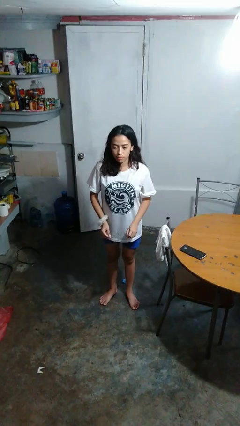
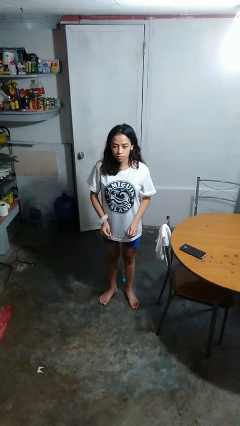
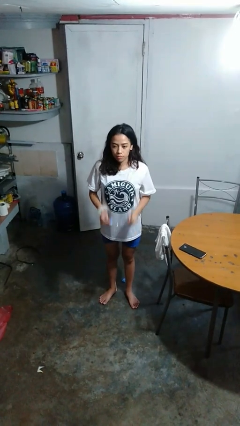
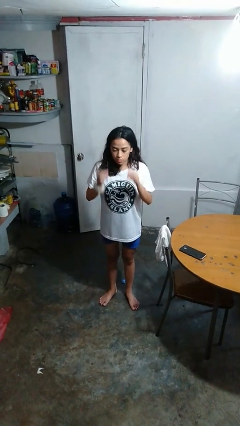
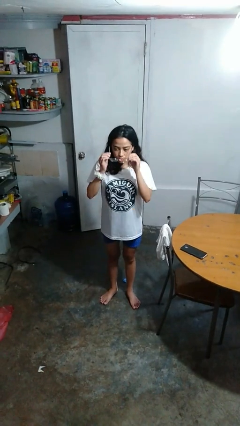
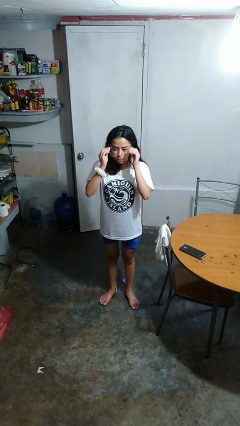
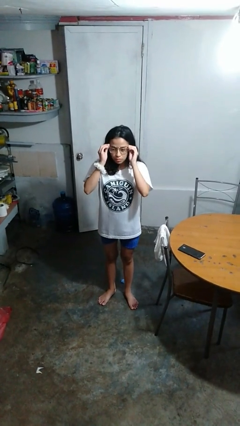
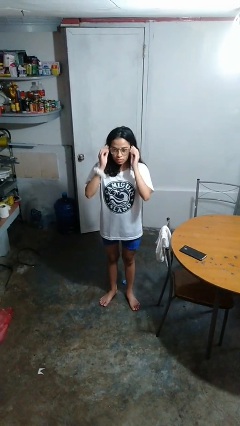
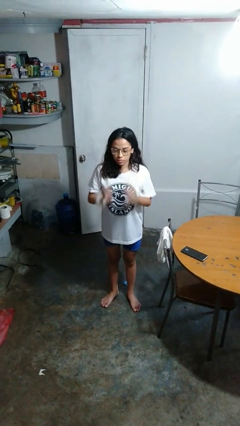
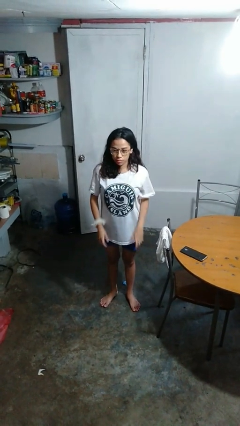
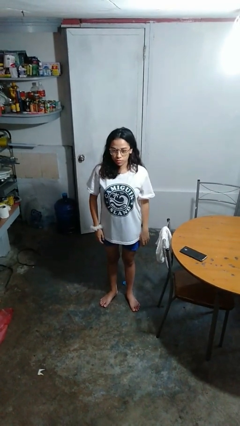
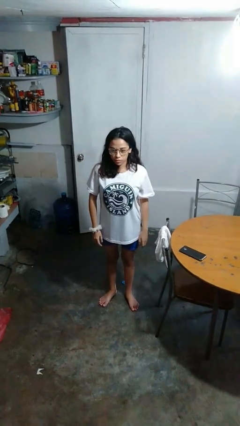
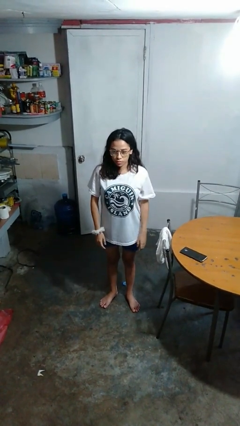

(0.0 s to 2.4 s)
person puts on glasses

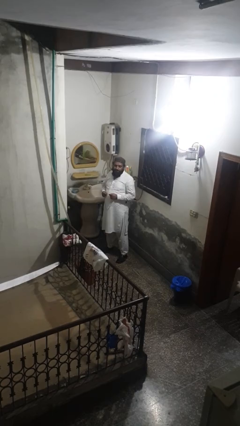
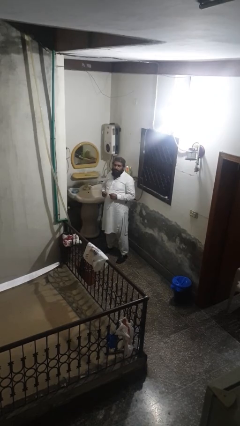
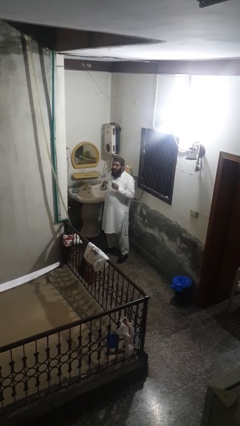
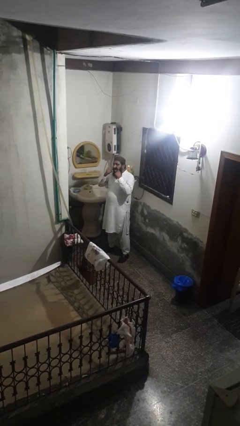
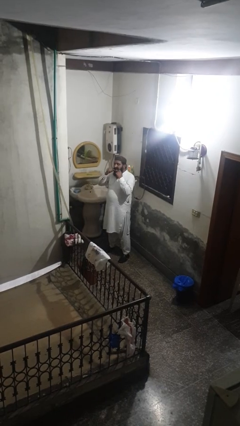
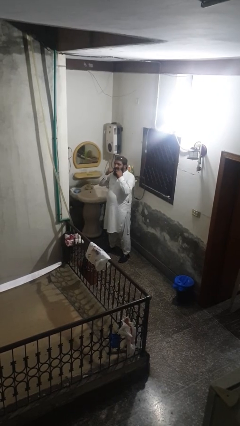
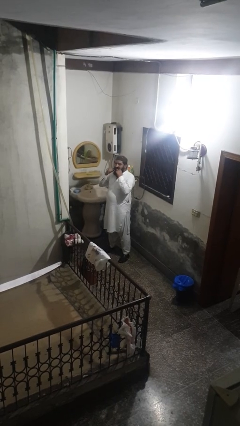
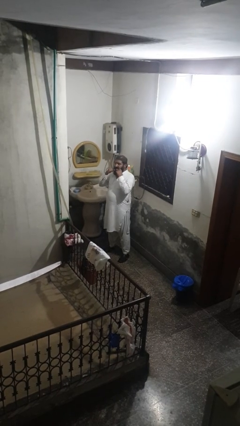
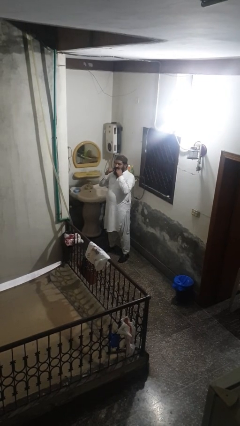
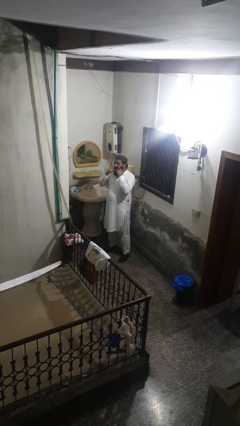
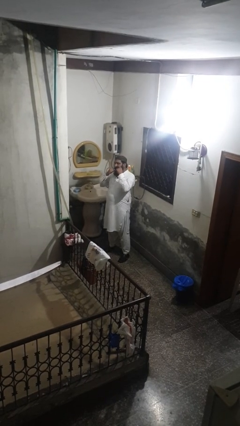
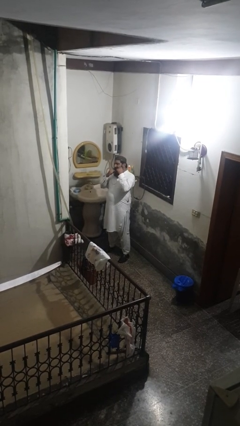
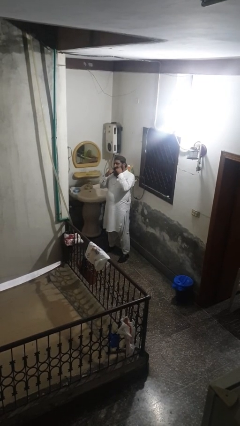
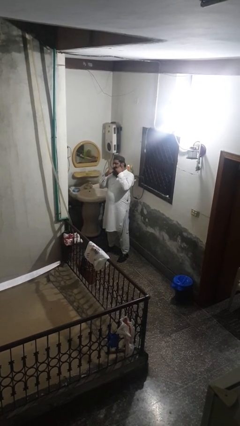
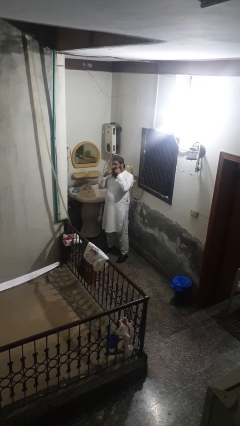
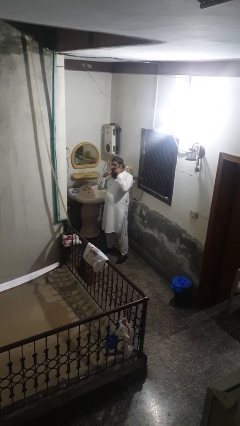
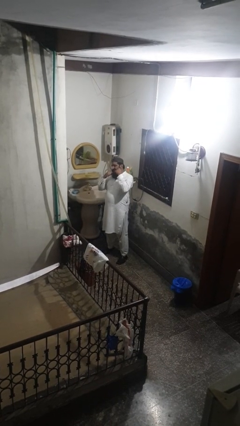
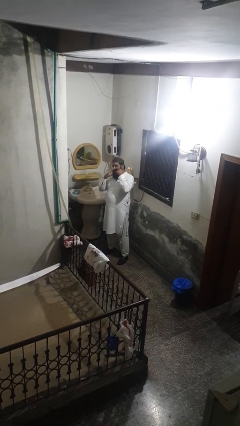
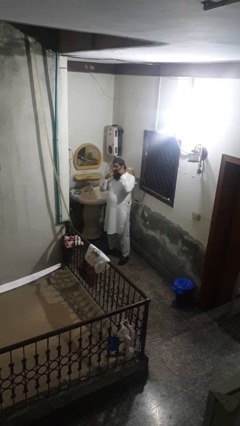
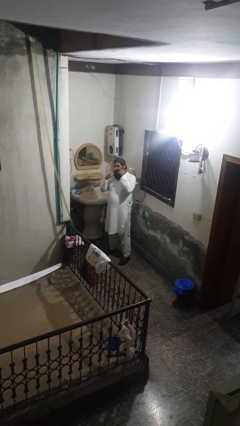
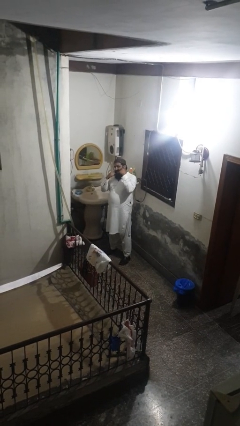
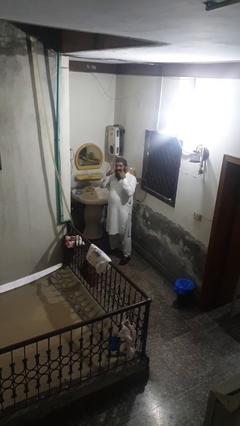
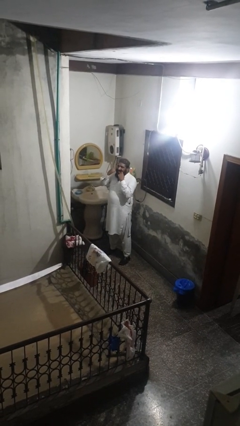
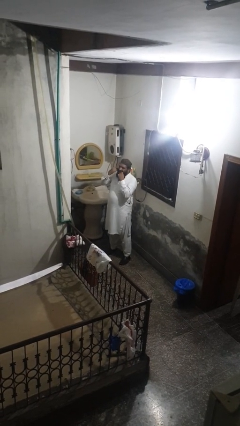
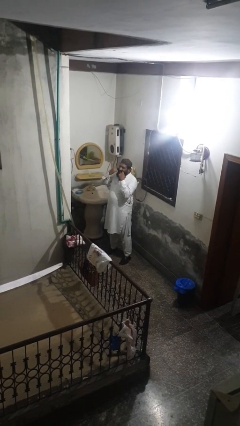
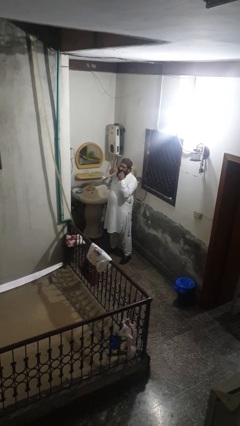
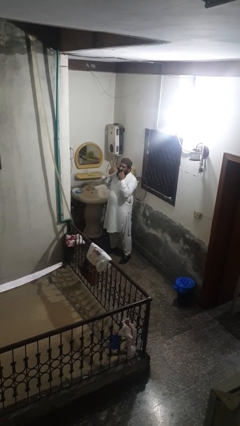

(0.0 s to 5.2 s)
person flosses

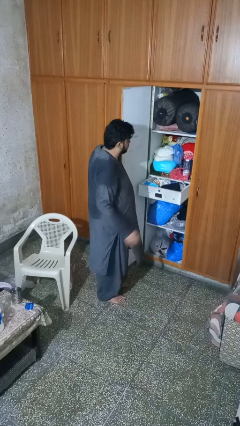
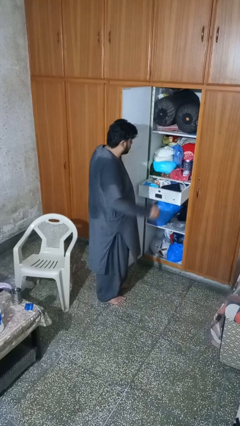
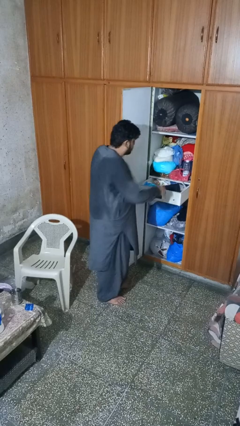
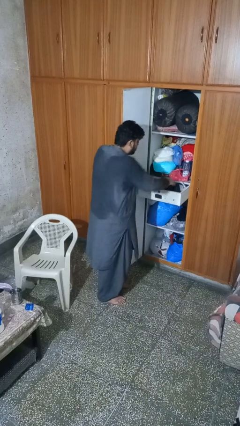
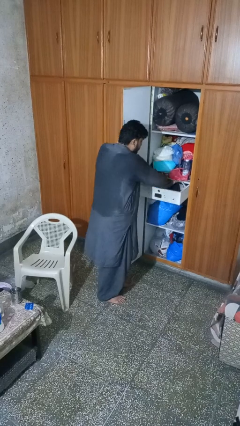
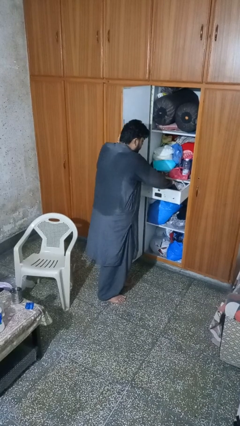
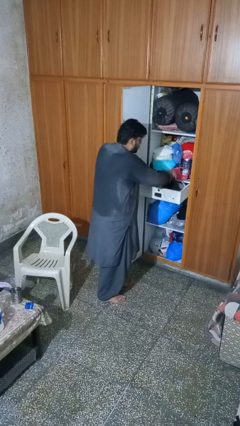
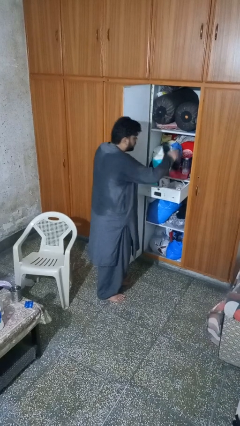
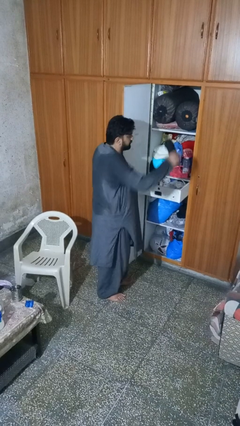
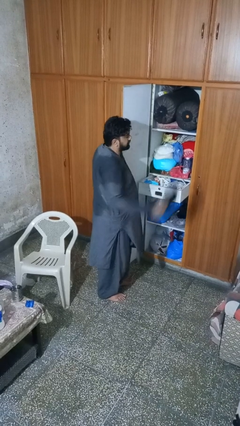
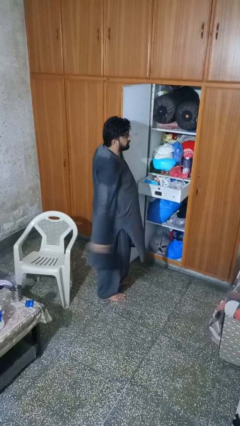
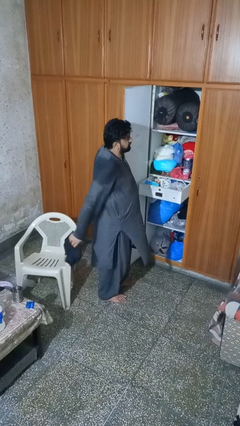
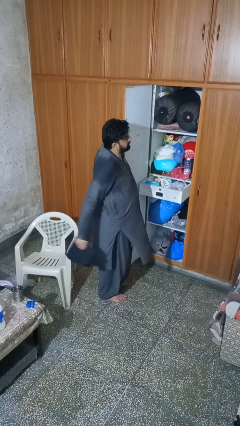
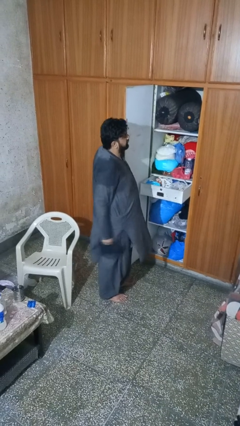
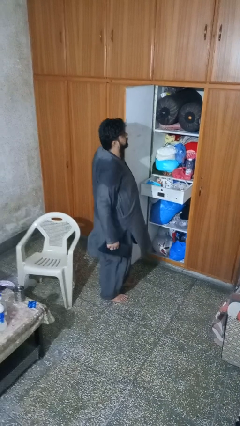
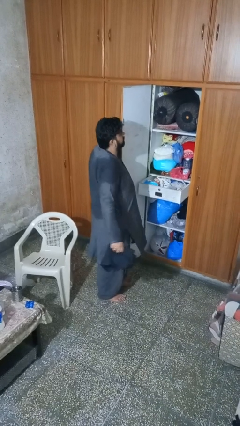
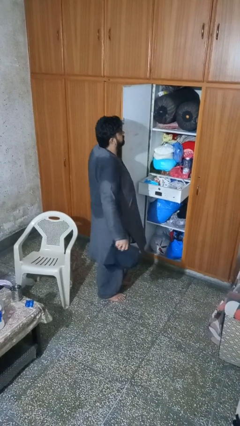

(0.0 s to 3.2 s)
person takes clothes from dresser

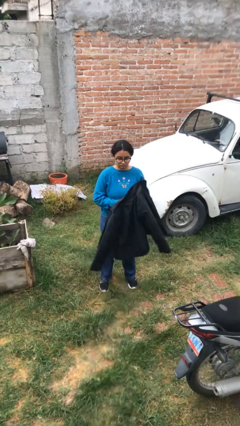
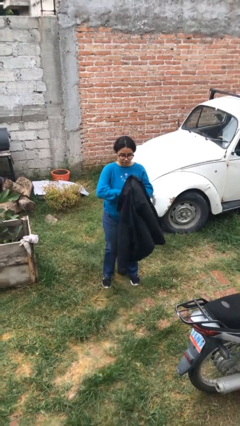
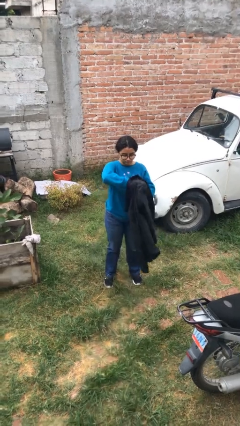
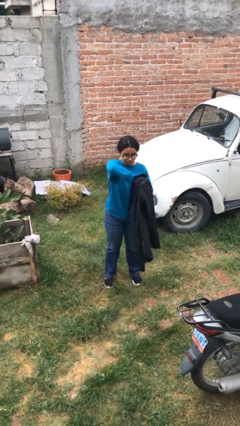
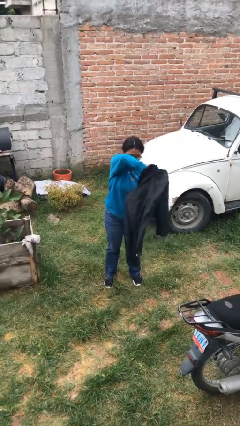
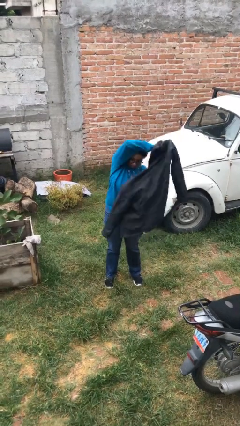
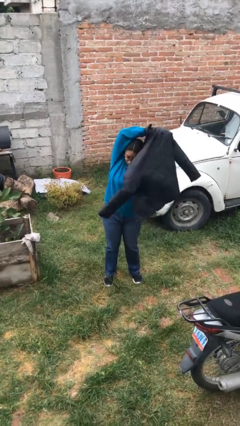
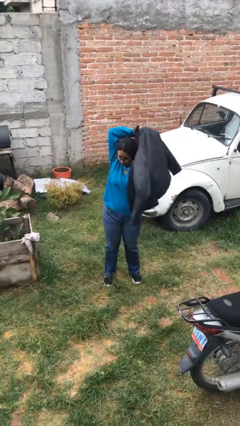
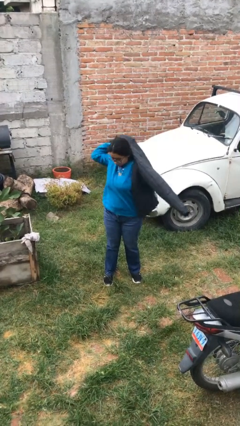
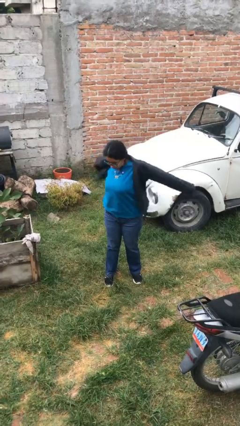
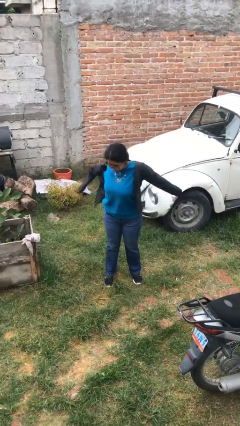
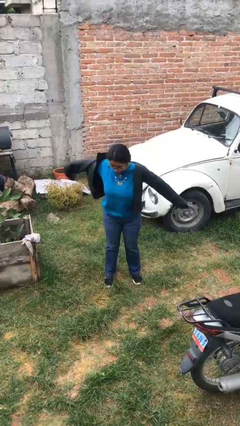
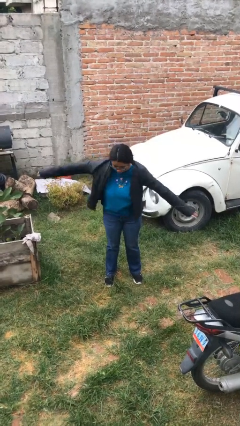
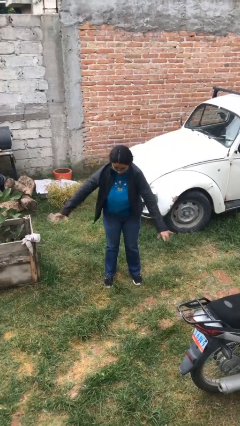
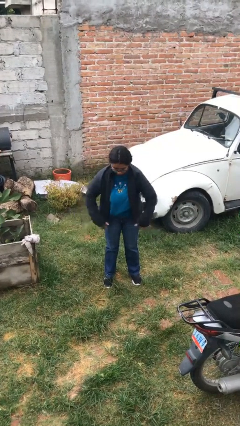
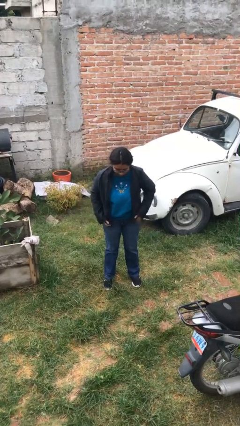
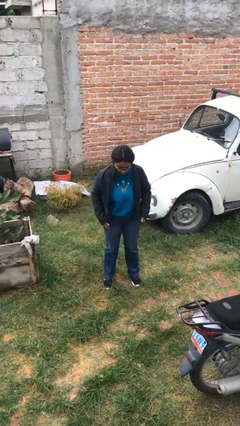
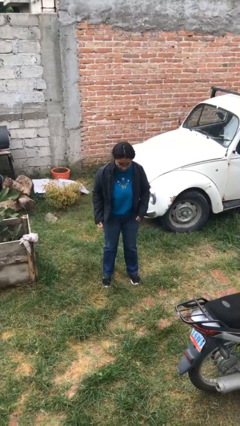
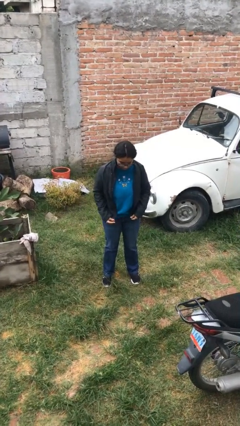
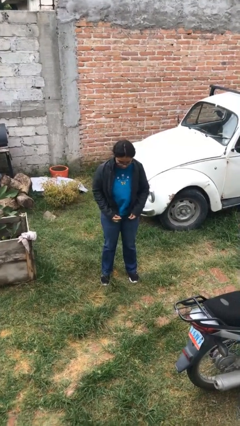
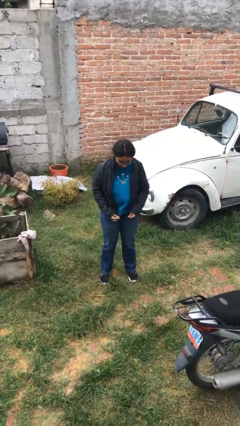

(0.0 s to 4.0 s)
person puts on jacket

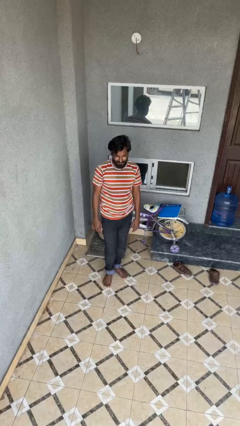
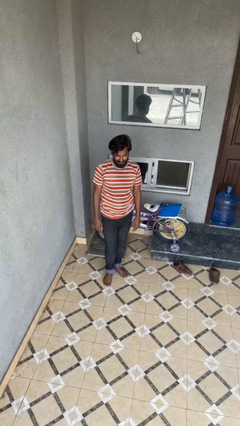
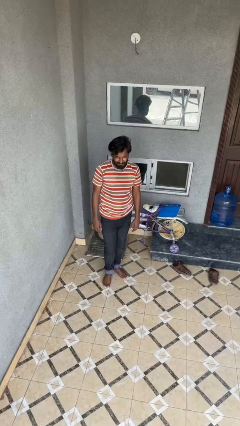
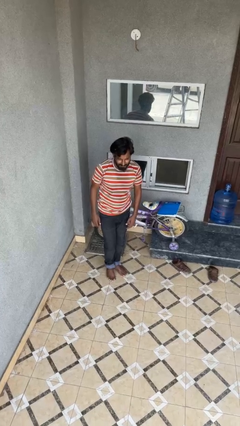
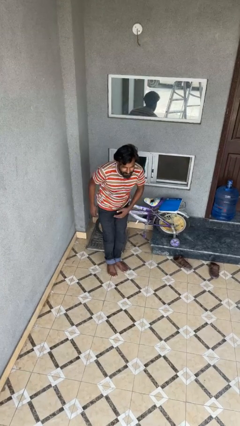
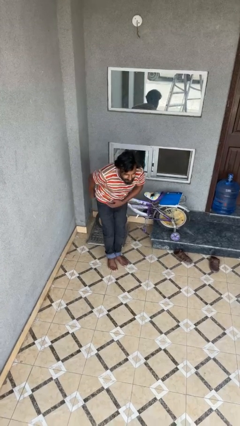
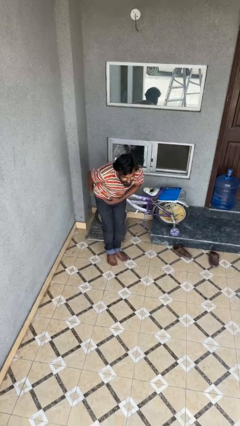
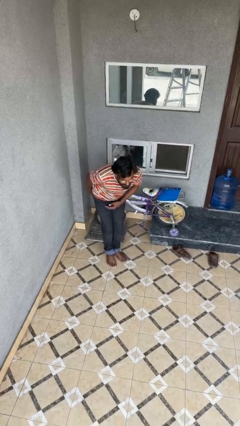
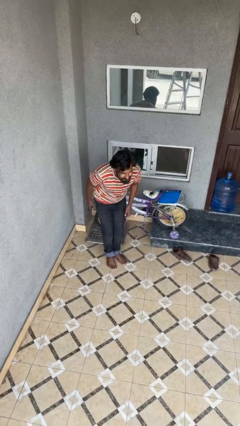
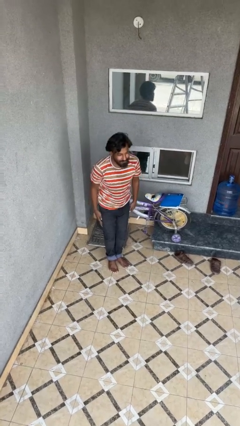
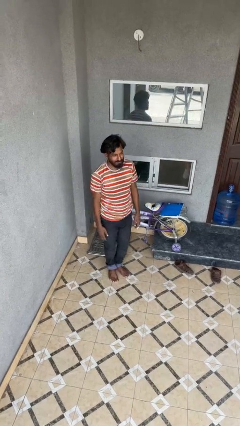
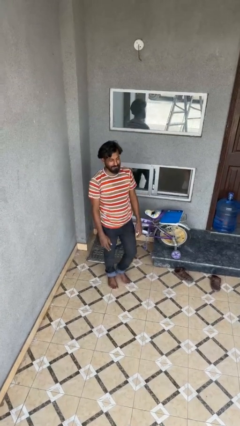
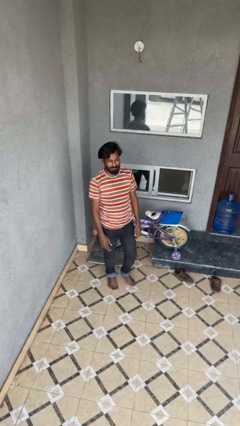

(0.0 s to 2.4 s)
person bows

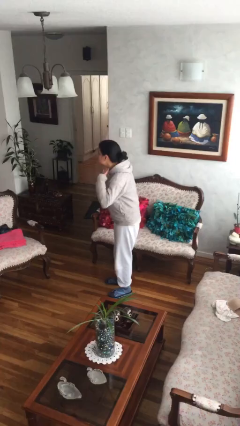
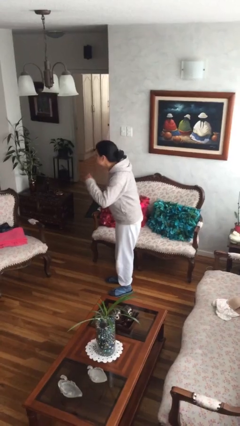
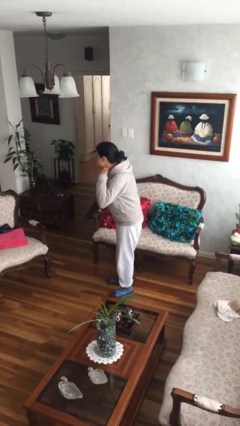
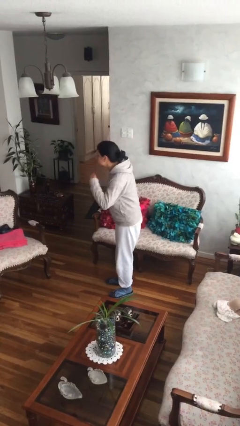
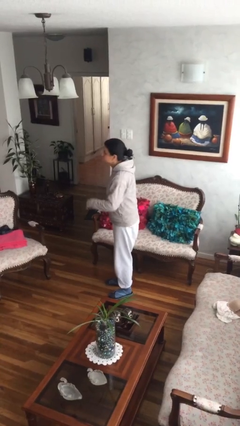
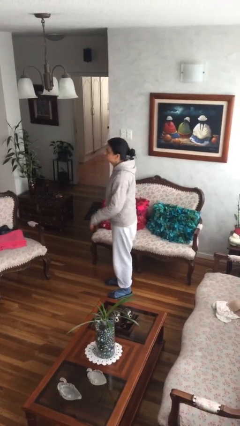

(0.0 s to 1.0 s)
person gestures cut
